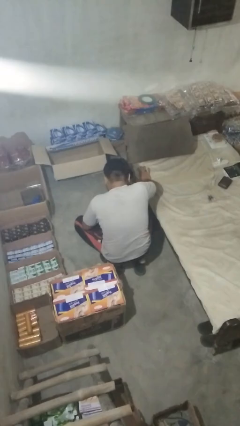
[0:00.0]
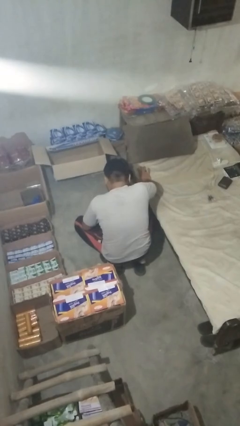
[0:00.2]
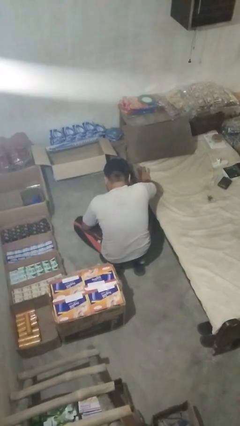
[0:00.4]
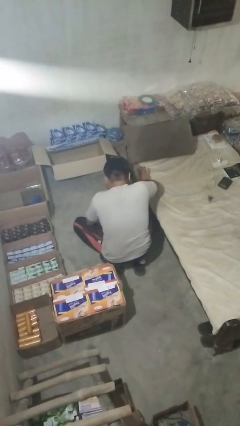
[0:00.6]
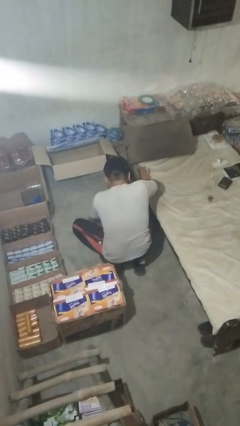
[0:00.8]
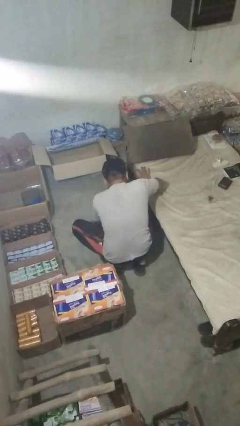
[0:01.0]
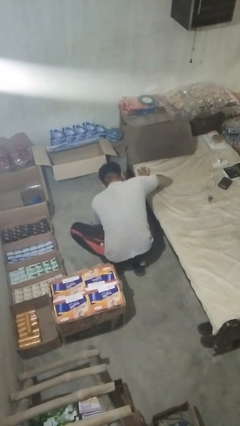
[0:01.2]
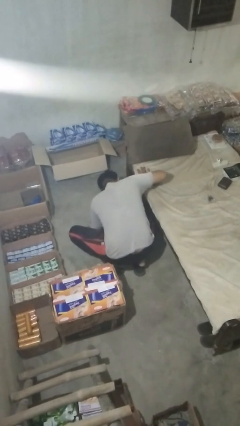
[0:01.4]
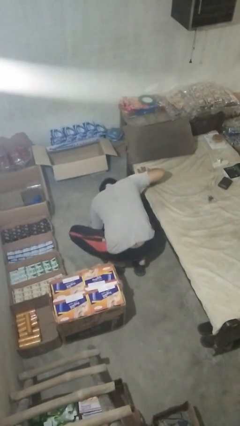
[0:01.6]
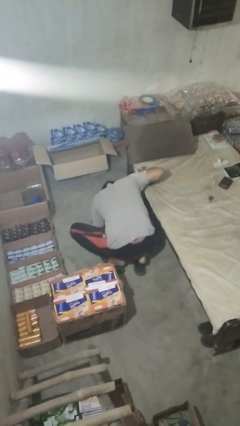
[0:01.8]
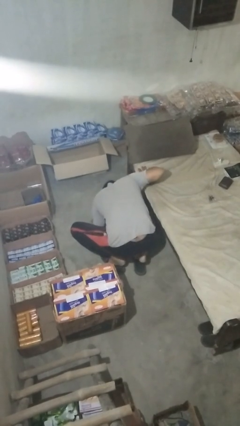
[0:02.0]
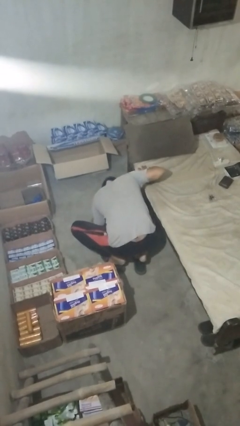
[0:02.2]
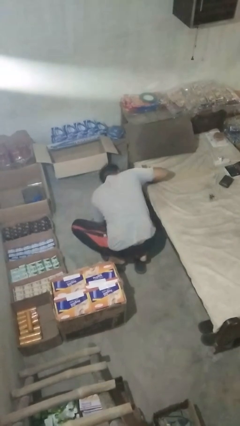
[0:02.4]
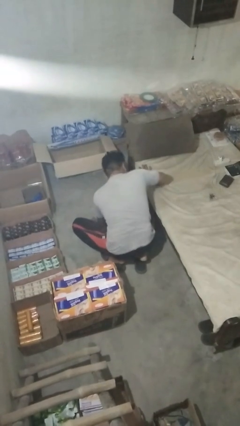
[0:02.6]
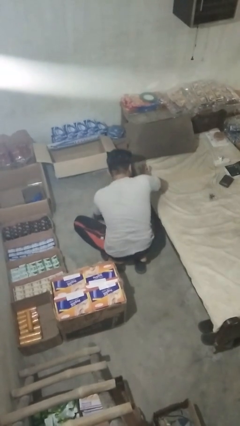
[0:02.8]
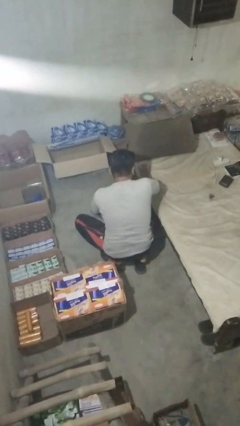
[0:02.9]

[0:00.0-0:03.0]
person searches under bed

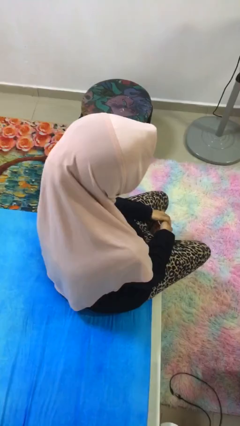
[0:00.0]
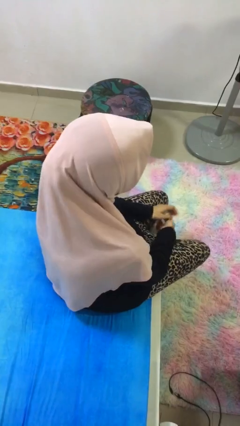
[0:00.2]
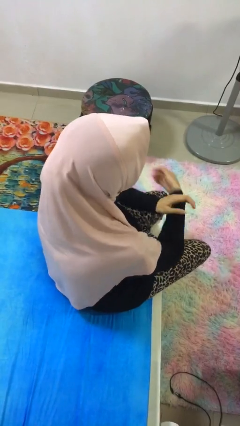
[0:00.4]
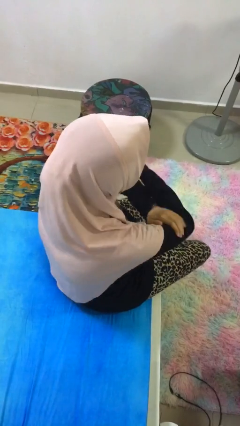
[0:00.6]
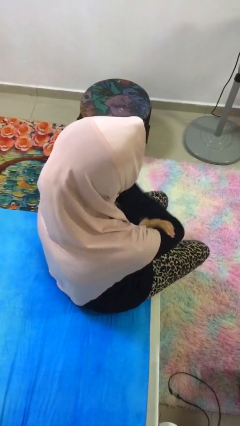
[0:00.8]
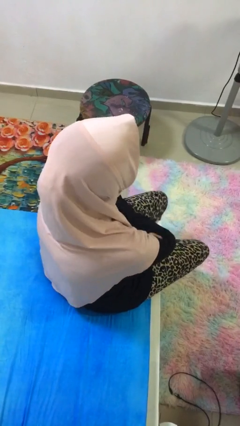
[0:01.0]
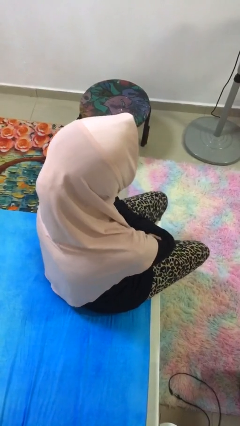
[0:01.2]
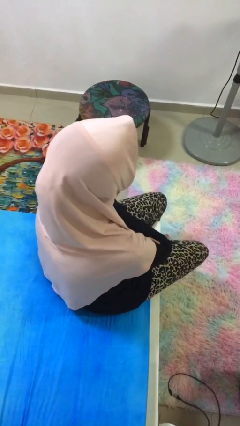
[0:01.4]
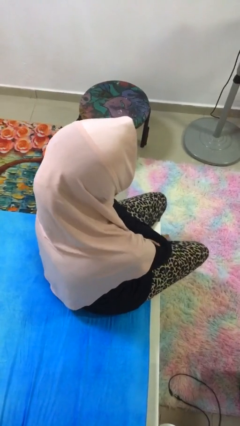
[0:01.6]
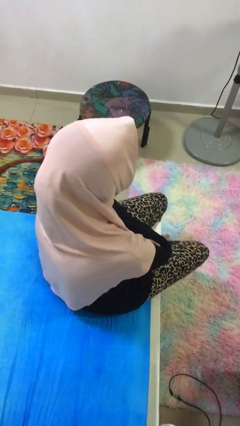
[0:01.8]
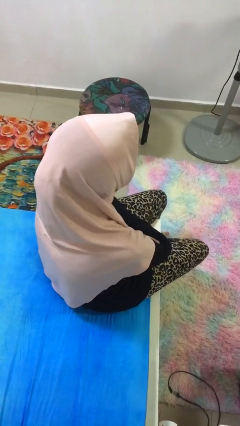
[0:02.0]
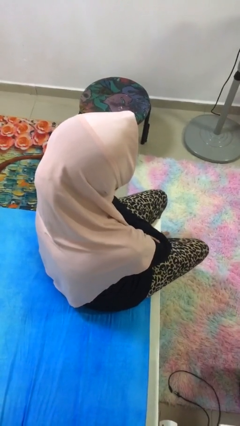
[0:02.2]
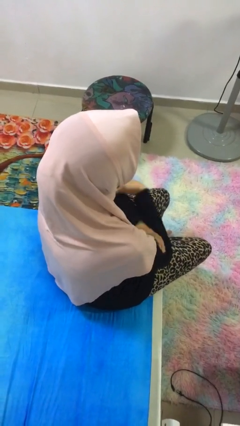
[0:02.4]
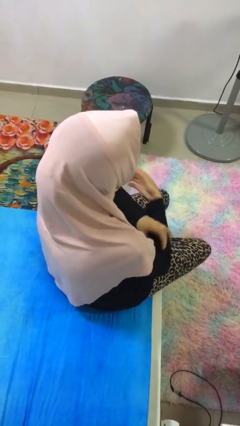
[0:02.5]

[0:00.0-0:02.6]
person crosses arms

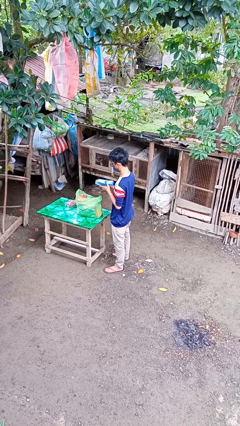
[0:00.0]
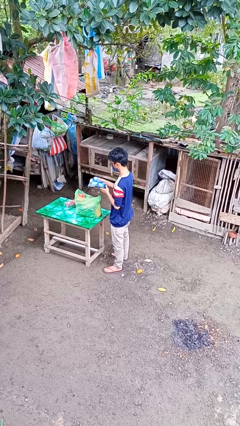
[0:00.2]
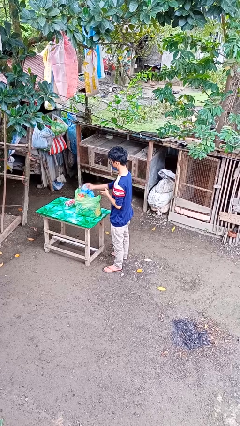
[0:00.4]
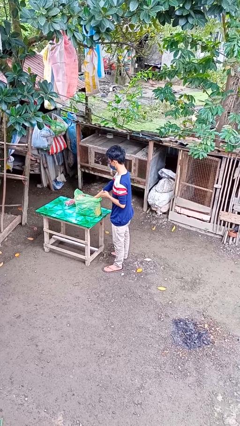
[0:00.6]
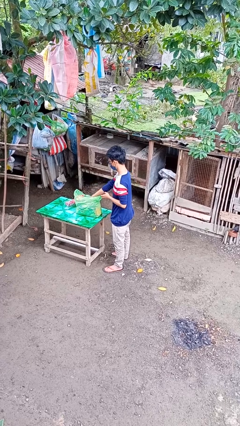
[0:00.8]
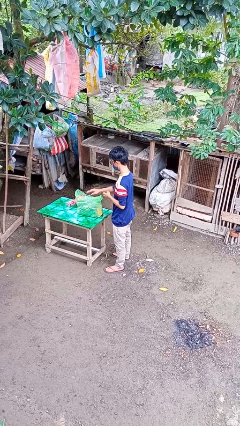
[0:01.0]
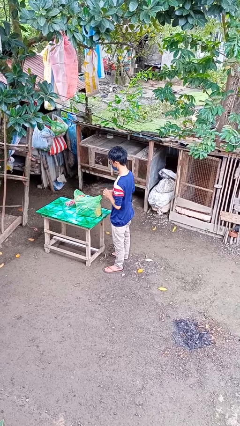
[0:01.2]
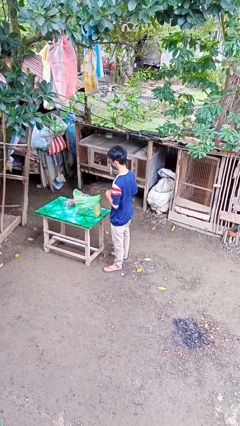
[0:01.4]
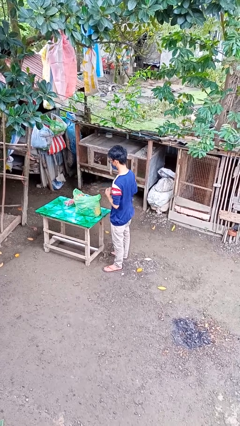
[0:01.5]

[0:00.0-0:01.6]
person puts object into bag

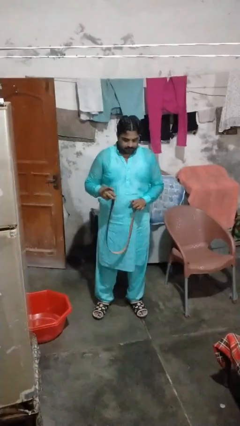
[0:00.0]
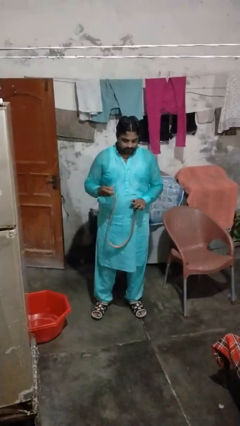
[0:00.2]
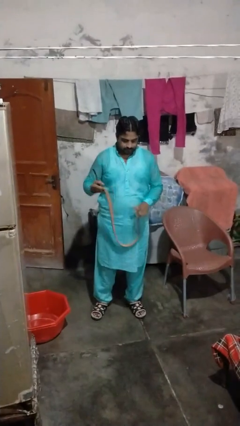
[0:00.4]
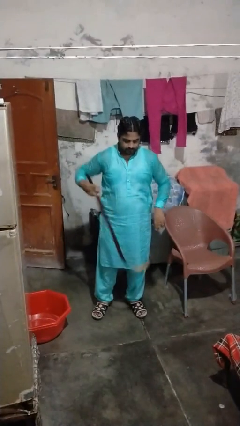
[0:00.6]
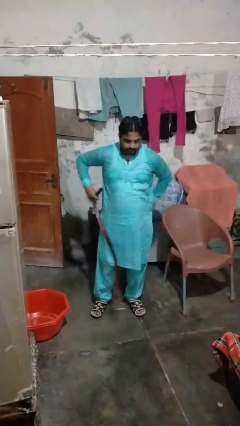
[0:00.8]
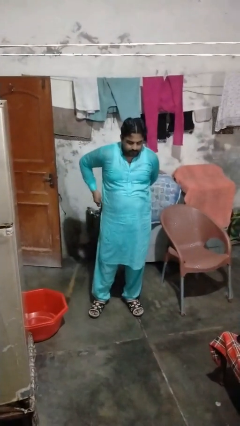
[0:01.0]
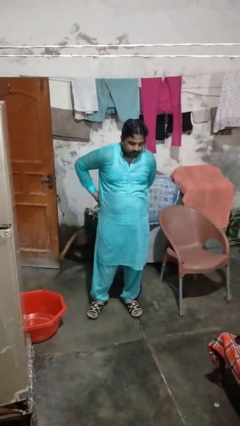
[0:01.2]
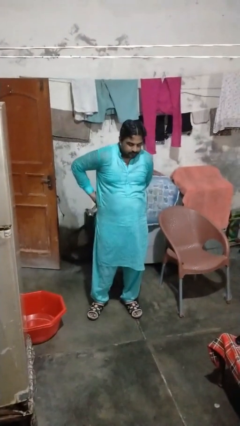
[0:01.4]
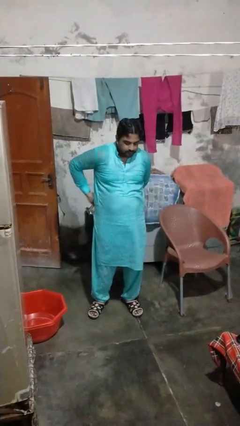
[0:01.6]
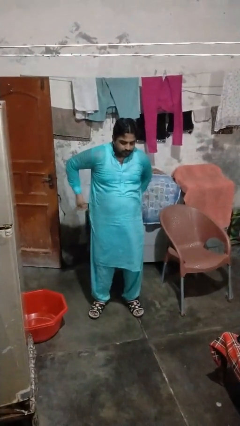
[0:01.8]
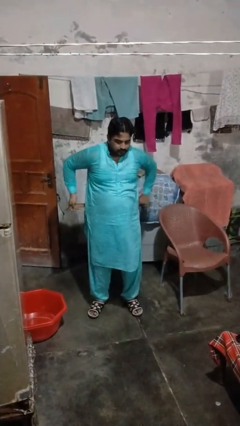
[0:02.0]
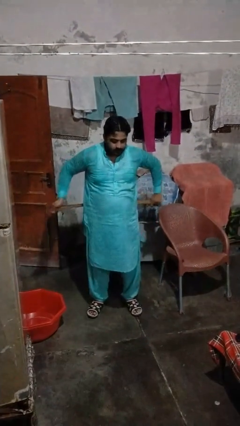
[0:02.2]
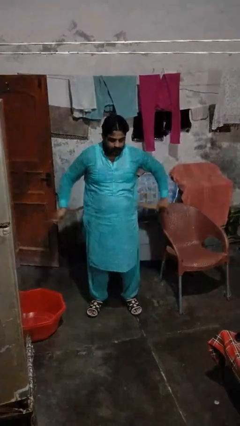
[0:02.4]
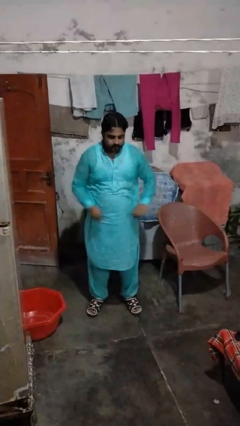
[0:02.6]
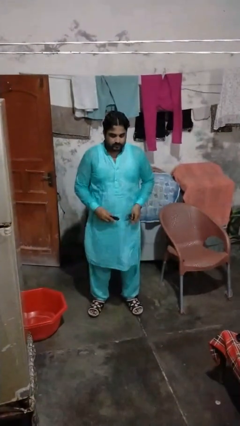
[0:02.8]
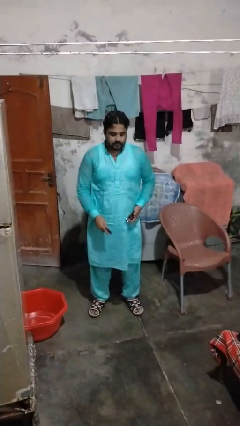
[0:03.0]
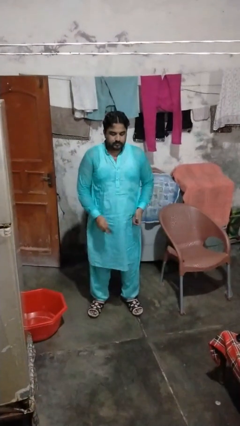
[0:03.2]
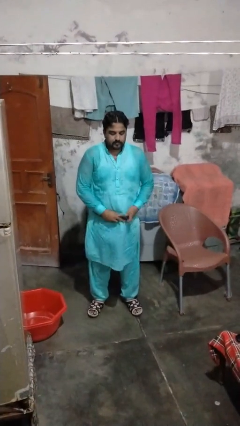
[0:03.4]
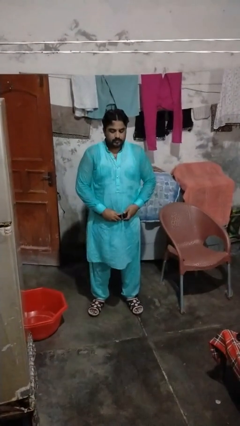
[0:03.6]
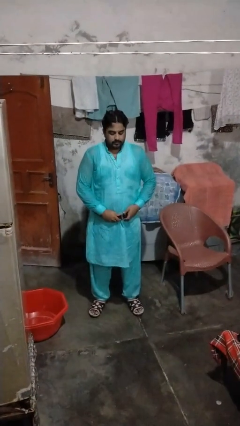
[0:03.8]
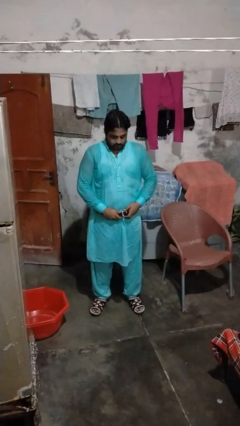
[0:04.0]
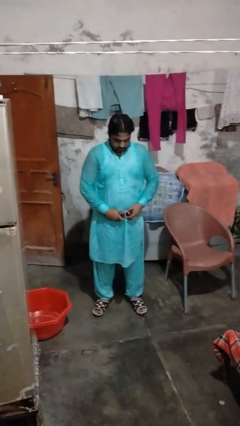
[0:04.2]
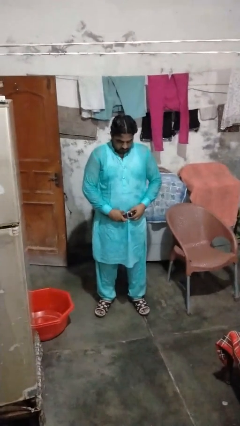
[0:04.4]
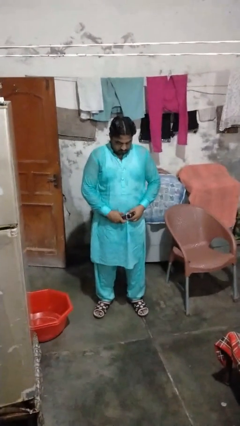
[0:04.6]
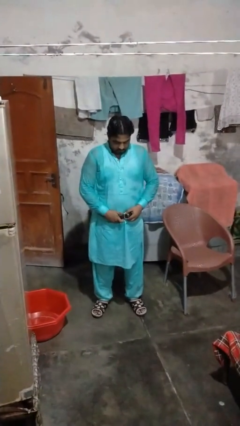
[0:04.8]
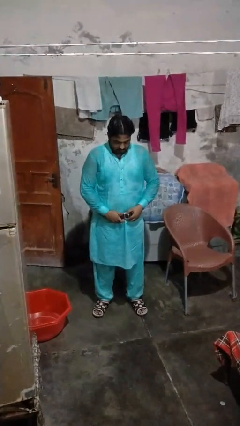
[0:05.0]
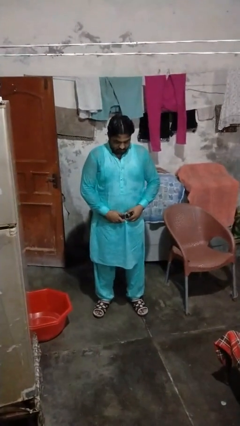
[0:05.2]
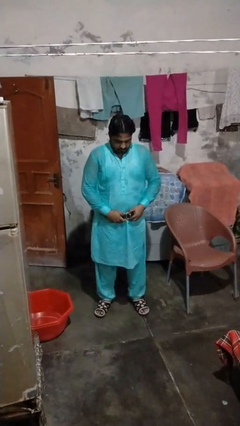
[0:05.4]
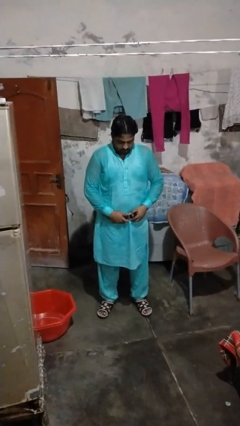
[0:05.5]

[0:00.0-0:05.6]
person puts on belt

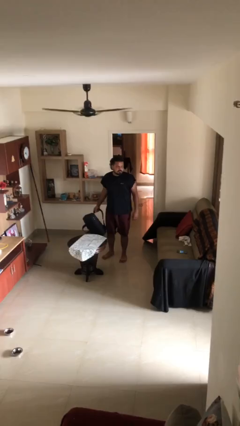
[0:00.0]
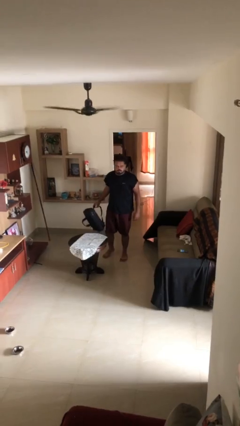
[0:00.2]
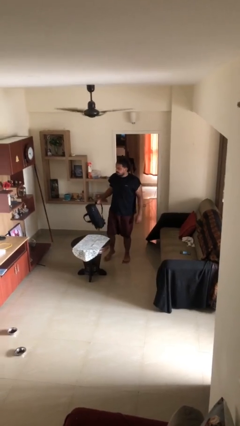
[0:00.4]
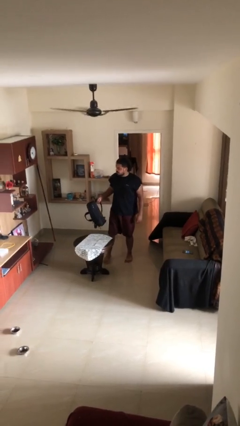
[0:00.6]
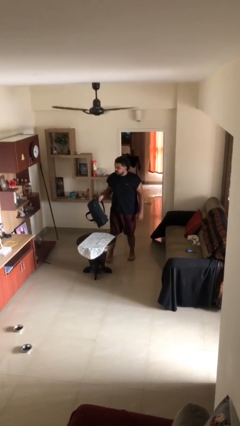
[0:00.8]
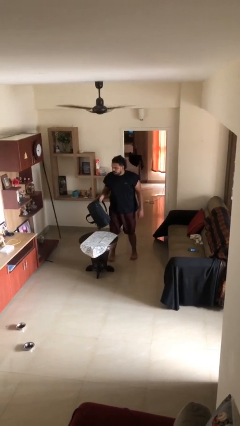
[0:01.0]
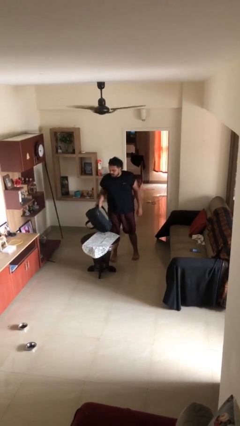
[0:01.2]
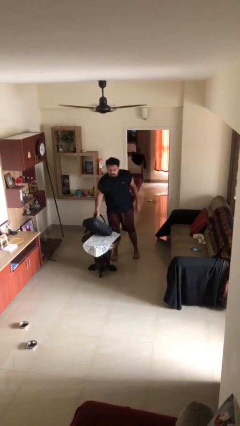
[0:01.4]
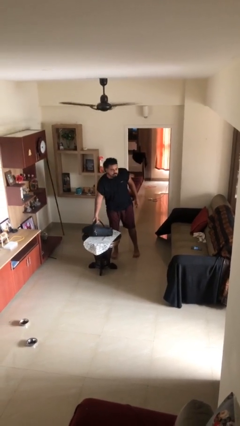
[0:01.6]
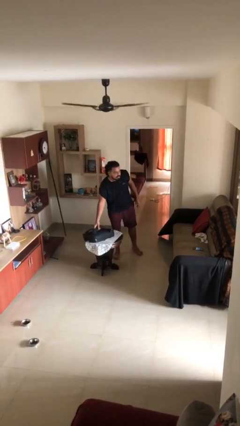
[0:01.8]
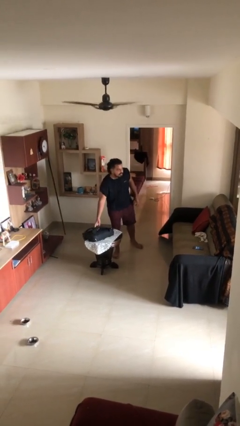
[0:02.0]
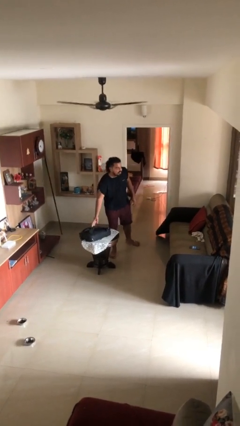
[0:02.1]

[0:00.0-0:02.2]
person puts down object on table

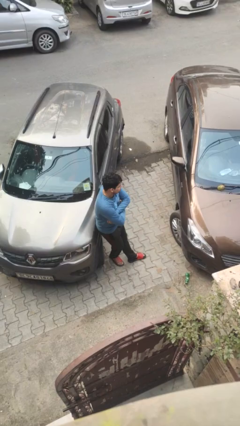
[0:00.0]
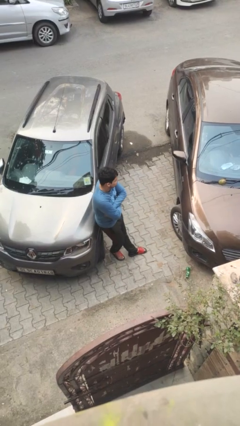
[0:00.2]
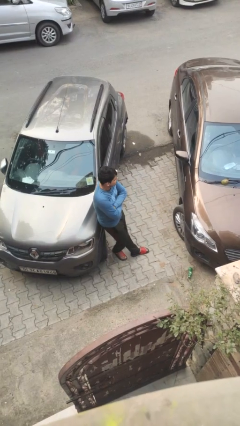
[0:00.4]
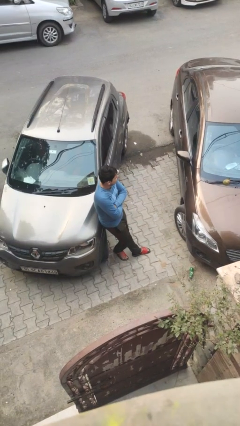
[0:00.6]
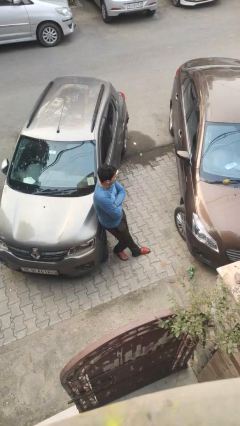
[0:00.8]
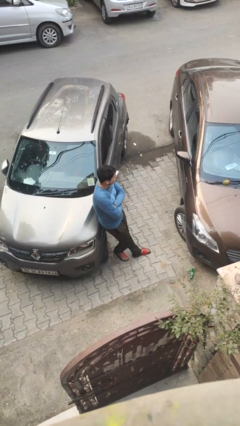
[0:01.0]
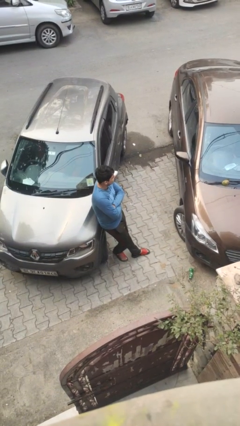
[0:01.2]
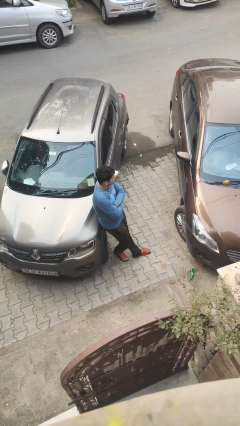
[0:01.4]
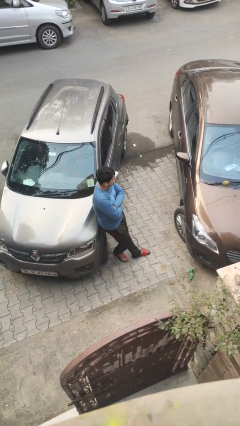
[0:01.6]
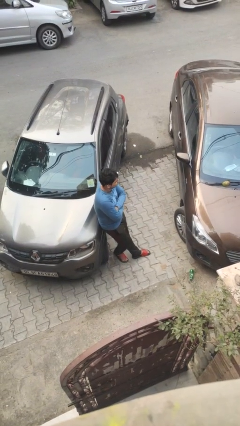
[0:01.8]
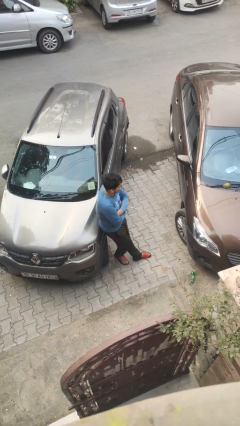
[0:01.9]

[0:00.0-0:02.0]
person leans against car

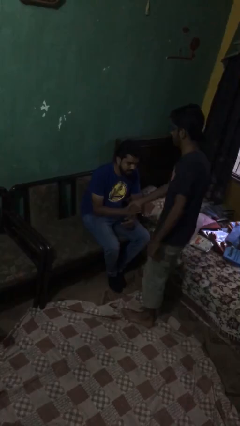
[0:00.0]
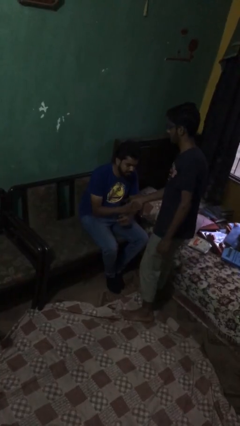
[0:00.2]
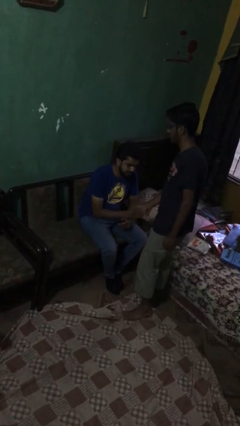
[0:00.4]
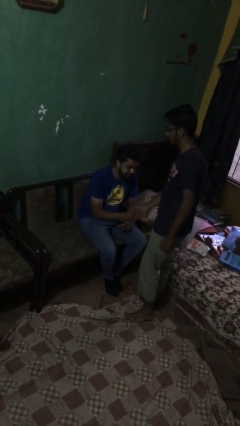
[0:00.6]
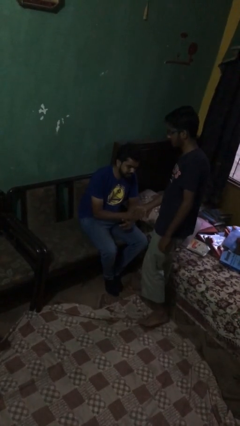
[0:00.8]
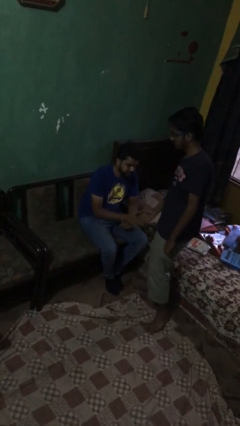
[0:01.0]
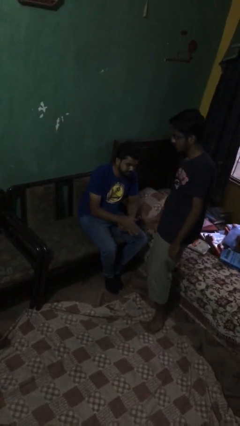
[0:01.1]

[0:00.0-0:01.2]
person shakes hand
